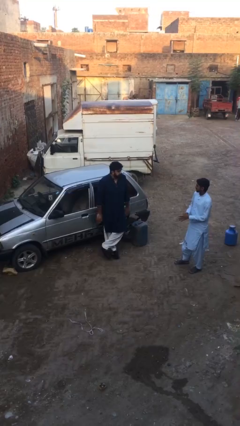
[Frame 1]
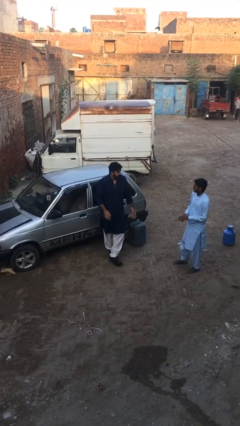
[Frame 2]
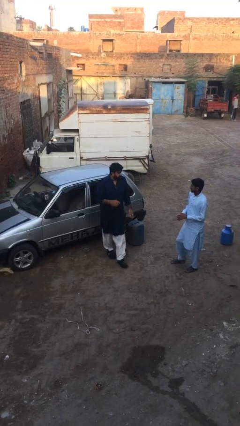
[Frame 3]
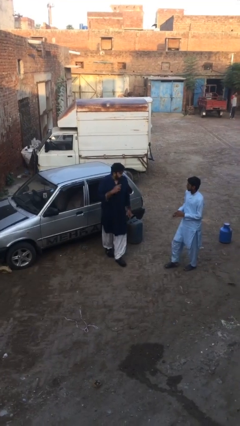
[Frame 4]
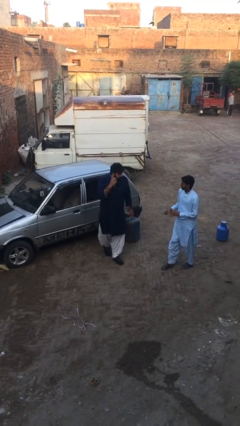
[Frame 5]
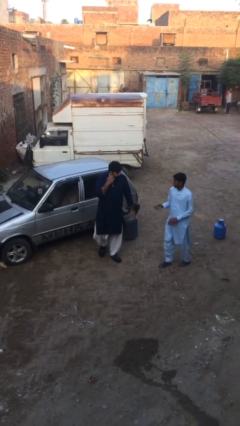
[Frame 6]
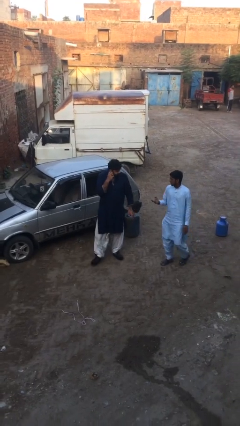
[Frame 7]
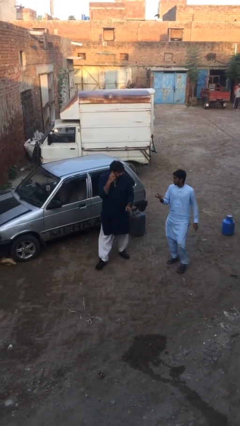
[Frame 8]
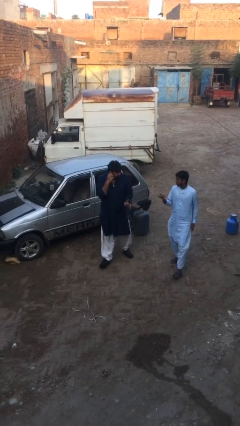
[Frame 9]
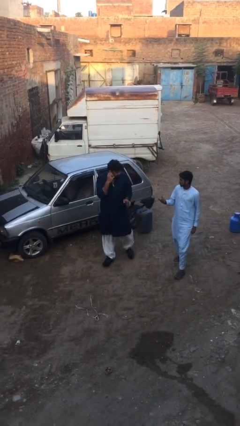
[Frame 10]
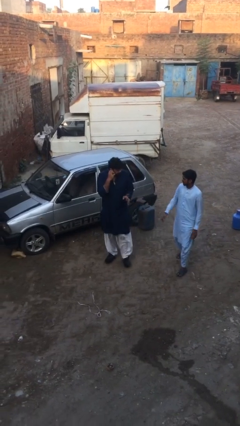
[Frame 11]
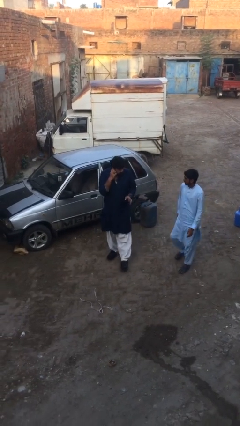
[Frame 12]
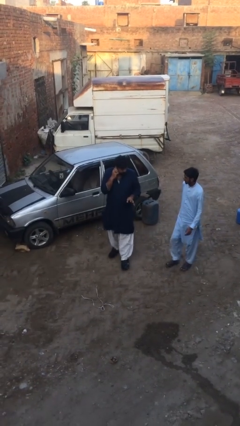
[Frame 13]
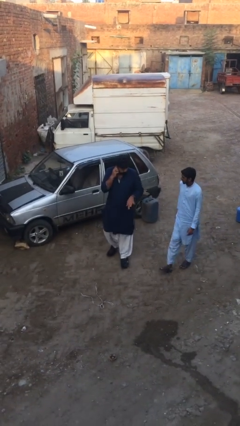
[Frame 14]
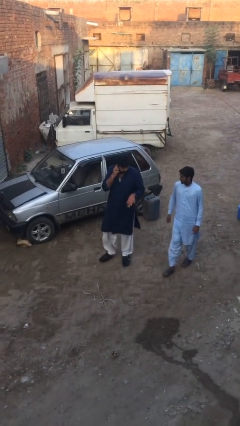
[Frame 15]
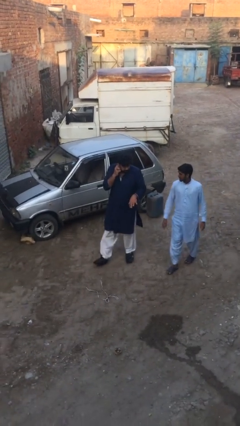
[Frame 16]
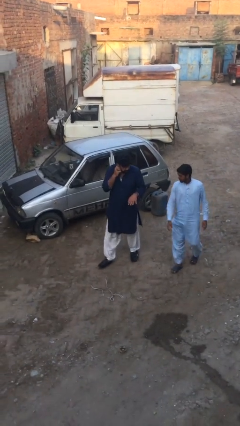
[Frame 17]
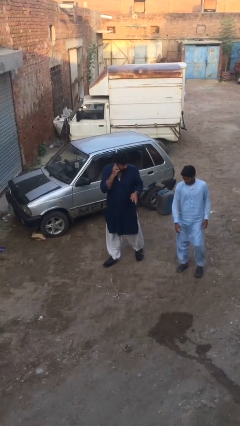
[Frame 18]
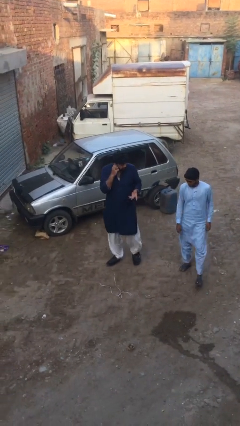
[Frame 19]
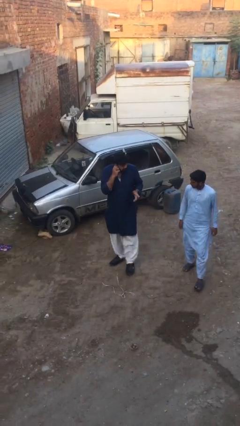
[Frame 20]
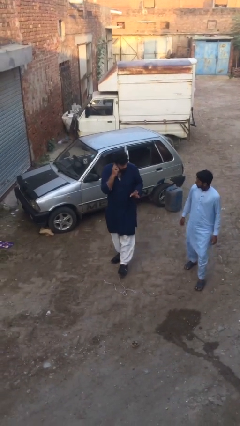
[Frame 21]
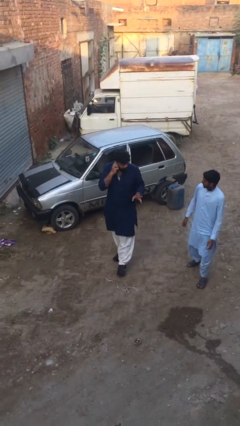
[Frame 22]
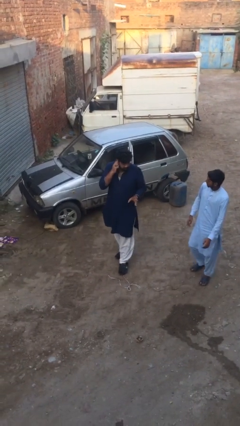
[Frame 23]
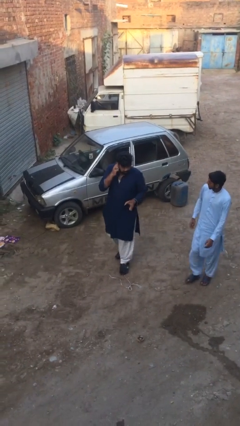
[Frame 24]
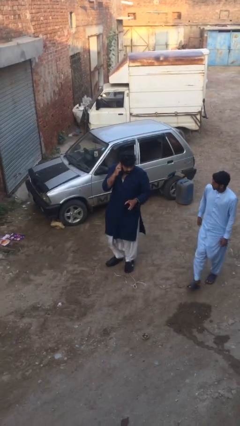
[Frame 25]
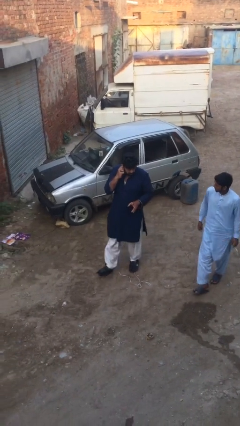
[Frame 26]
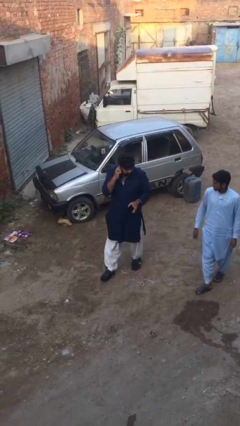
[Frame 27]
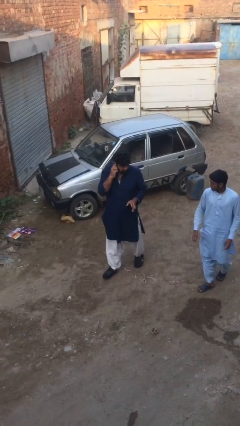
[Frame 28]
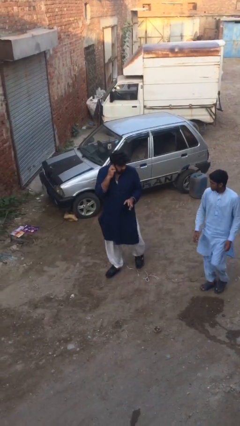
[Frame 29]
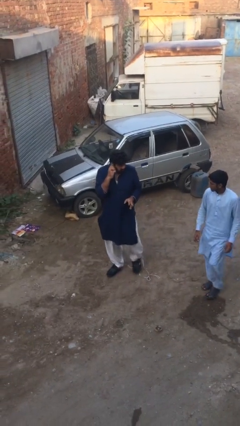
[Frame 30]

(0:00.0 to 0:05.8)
person talks to person

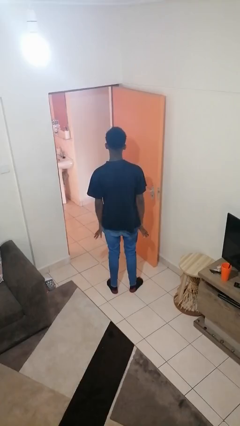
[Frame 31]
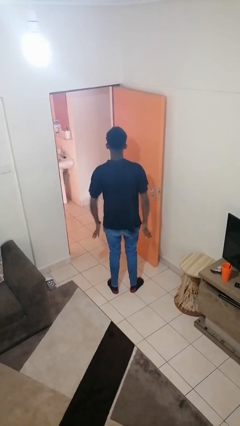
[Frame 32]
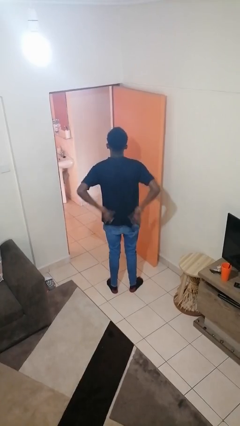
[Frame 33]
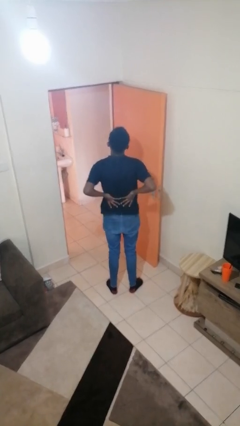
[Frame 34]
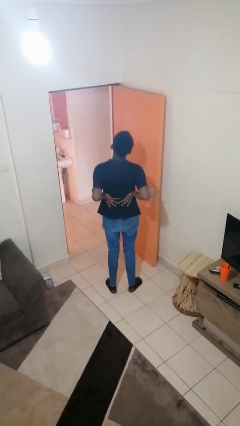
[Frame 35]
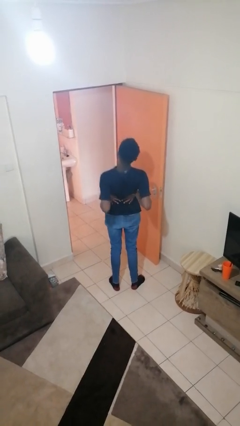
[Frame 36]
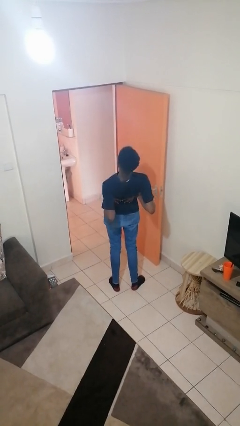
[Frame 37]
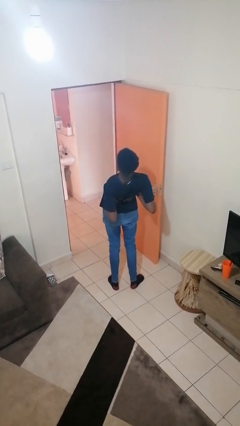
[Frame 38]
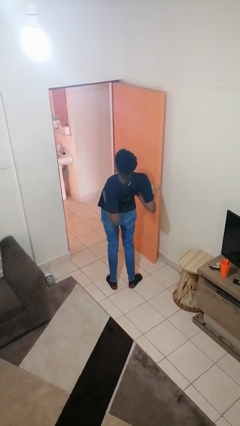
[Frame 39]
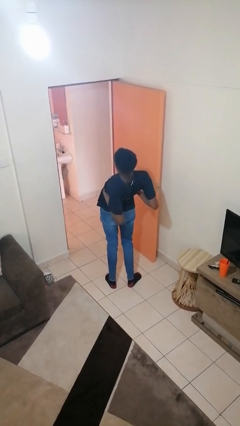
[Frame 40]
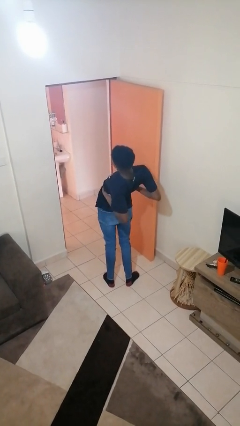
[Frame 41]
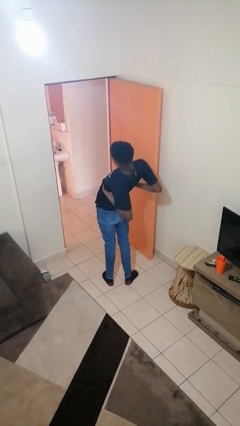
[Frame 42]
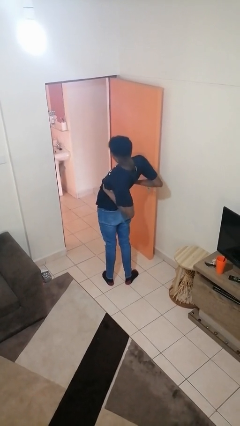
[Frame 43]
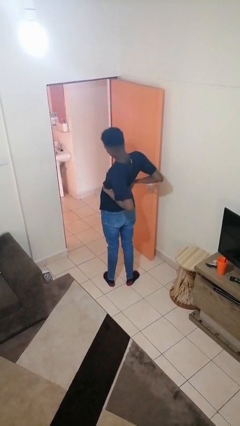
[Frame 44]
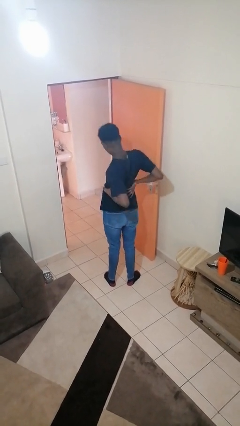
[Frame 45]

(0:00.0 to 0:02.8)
person stretches back

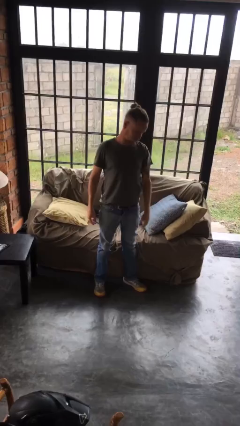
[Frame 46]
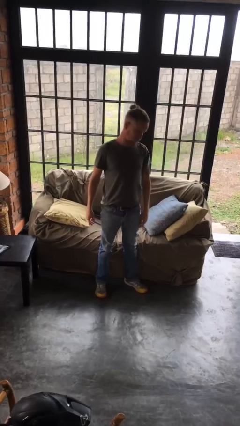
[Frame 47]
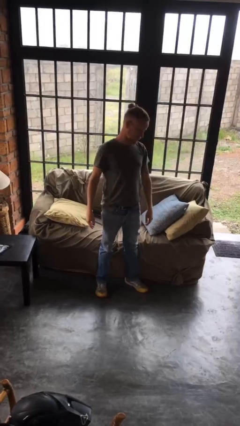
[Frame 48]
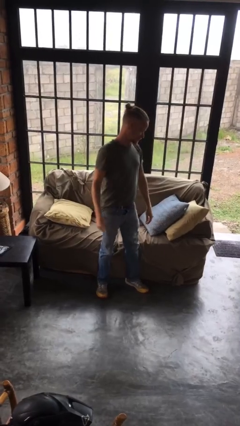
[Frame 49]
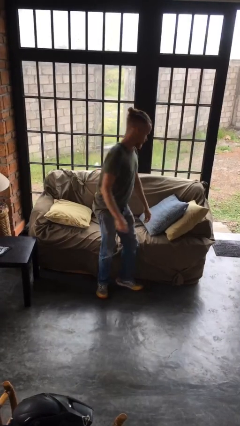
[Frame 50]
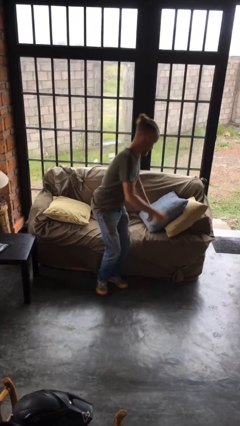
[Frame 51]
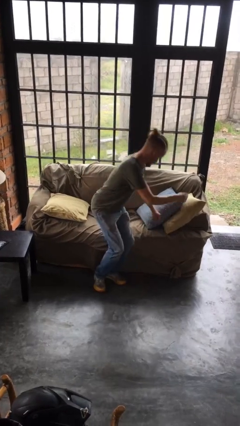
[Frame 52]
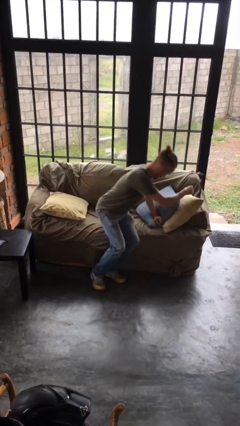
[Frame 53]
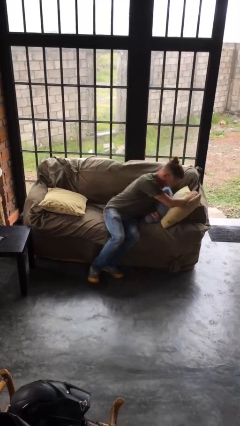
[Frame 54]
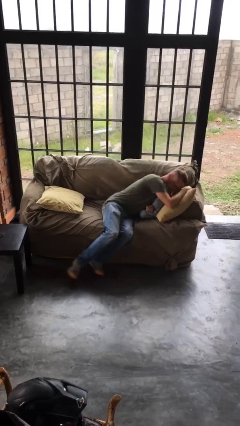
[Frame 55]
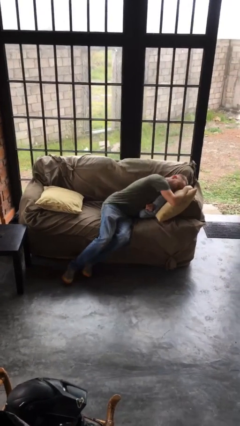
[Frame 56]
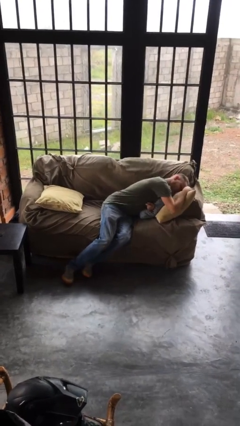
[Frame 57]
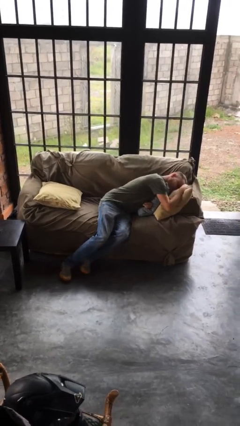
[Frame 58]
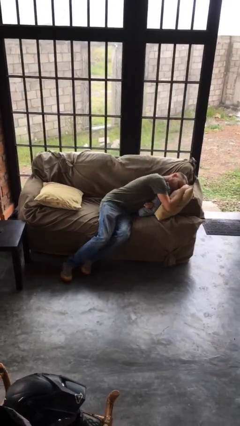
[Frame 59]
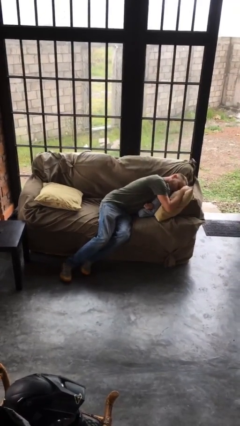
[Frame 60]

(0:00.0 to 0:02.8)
person lies down on couch

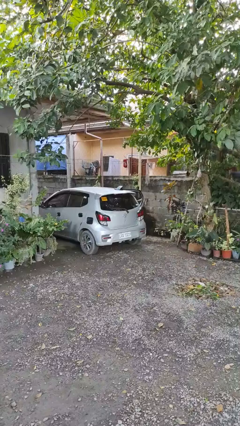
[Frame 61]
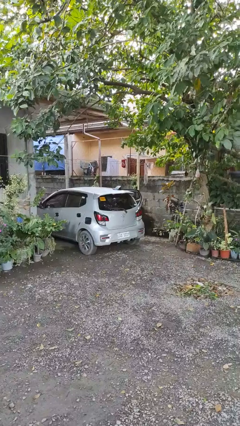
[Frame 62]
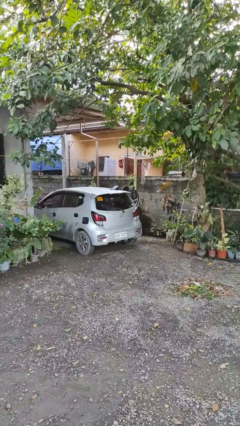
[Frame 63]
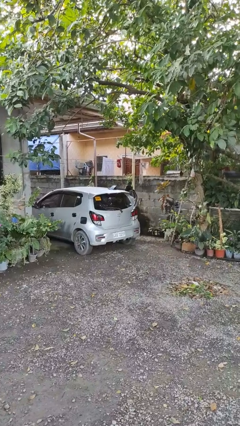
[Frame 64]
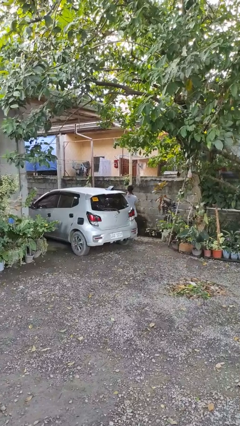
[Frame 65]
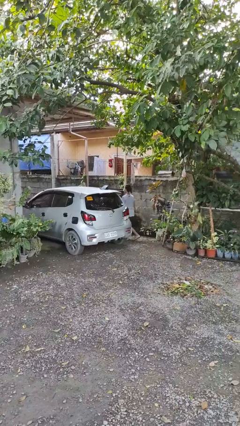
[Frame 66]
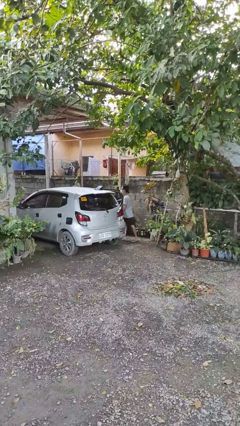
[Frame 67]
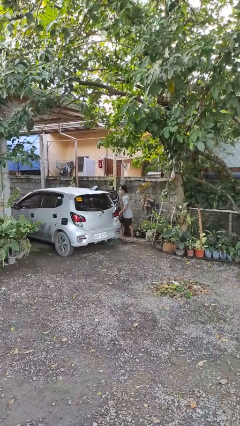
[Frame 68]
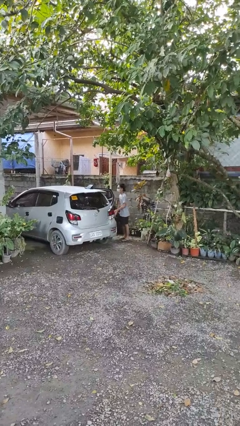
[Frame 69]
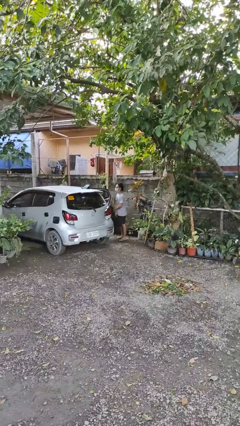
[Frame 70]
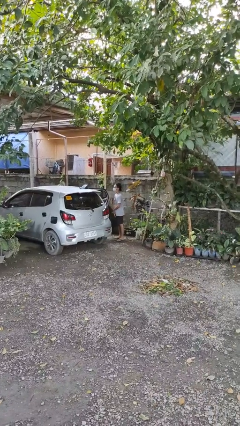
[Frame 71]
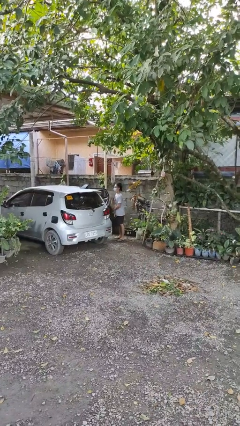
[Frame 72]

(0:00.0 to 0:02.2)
person exits car

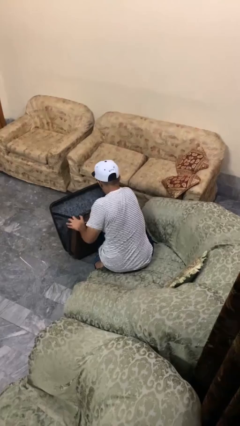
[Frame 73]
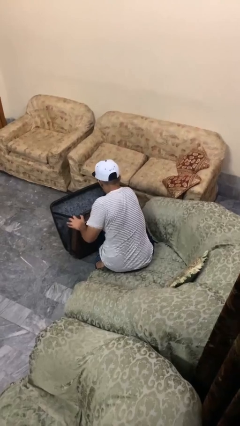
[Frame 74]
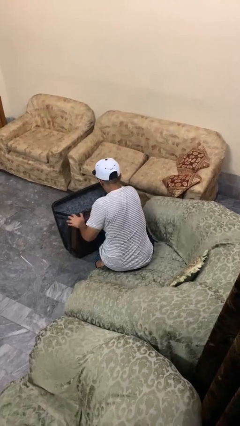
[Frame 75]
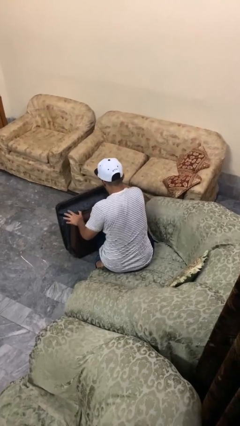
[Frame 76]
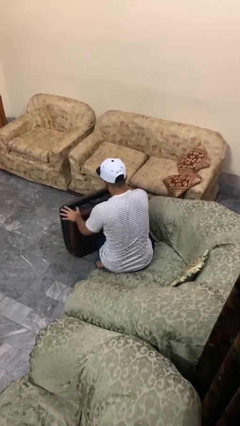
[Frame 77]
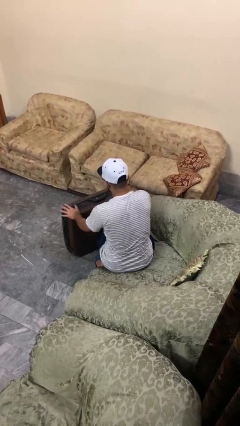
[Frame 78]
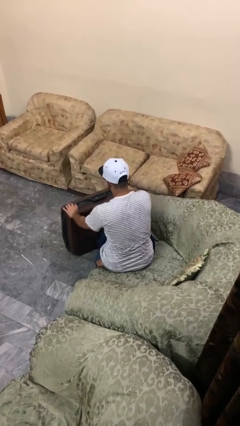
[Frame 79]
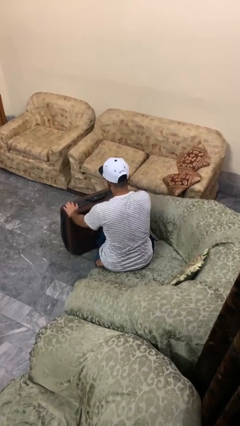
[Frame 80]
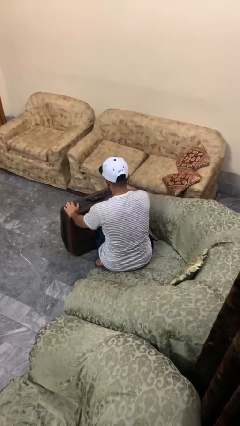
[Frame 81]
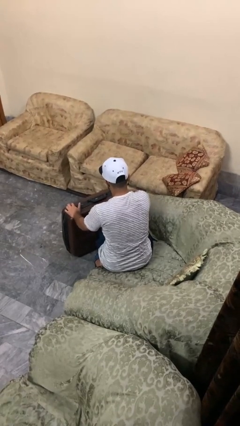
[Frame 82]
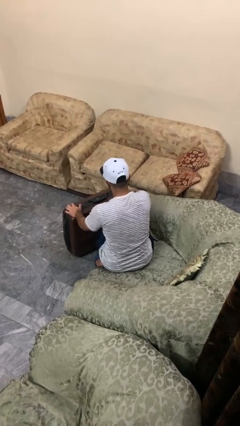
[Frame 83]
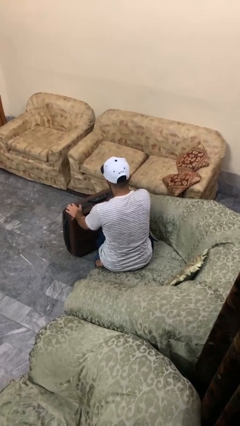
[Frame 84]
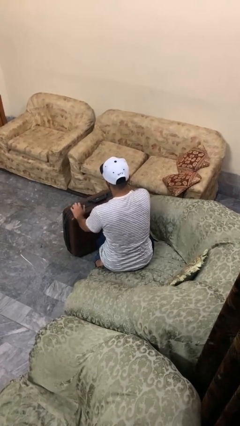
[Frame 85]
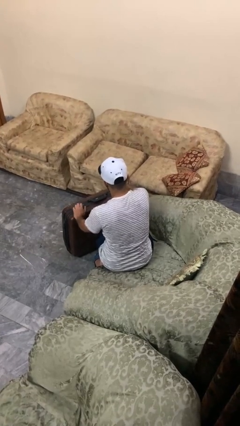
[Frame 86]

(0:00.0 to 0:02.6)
person closes suitcase

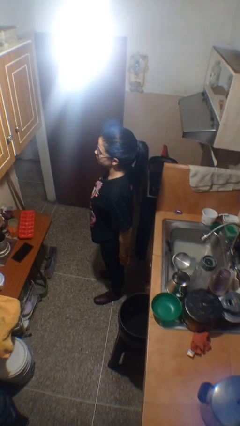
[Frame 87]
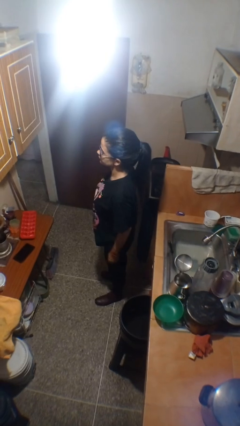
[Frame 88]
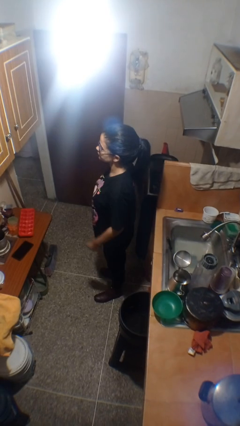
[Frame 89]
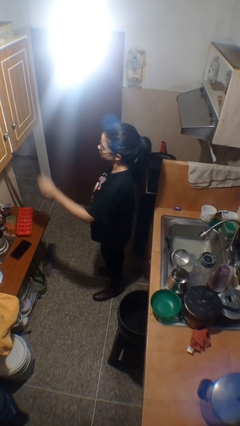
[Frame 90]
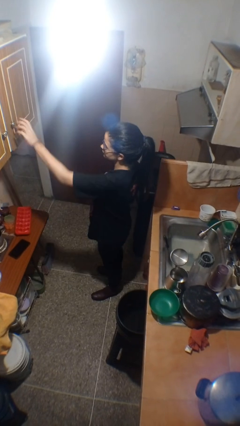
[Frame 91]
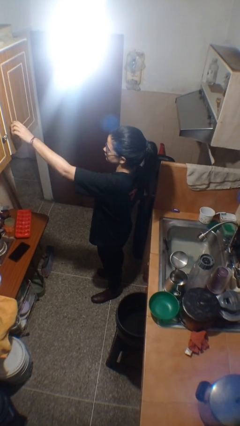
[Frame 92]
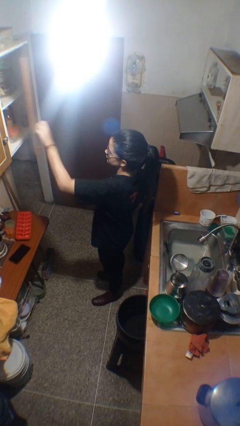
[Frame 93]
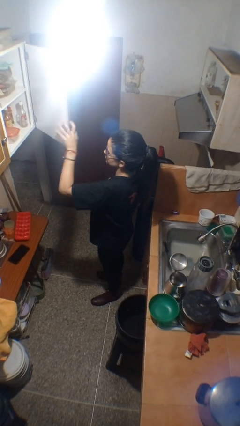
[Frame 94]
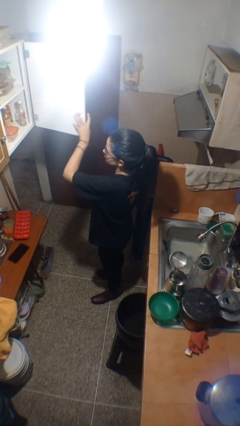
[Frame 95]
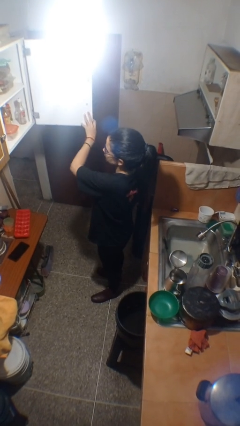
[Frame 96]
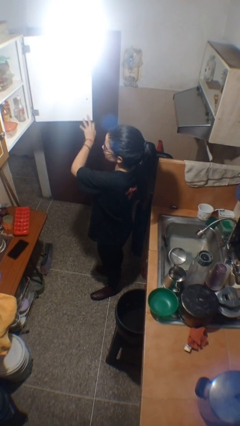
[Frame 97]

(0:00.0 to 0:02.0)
person opens cabinet
